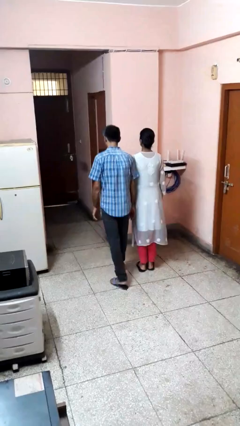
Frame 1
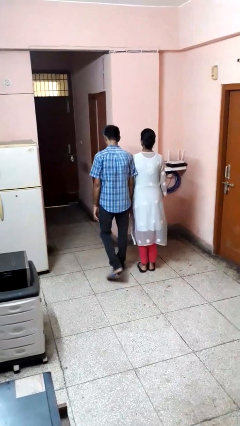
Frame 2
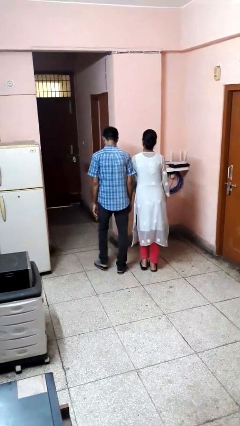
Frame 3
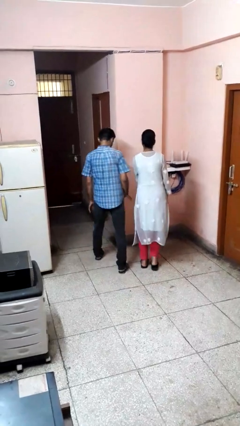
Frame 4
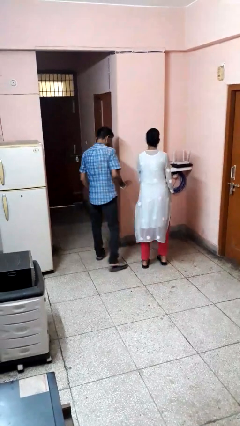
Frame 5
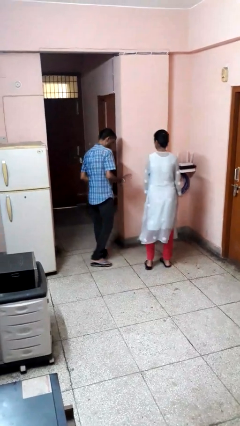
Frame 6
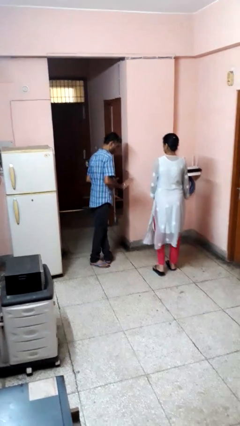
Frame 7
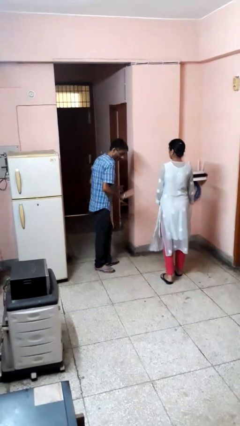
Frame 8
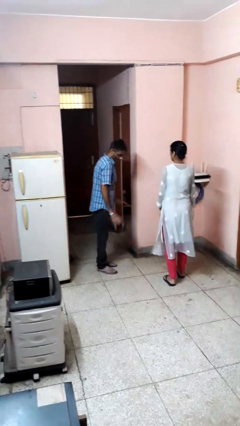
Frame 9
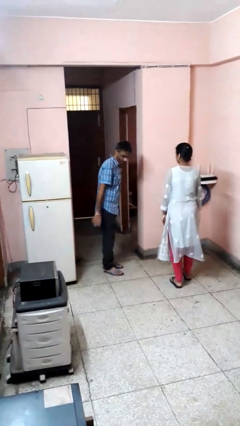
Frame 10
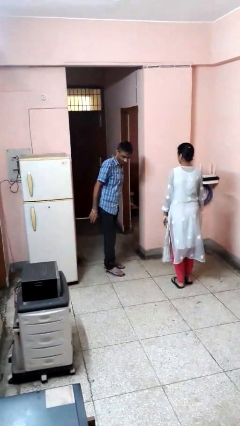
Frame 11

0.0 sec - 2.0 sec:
person bumps into person

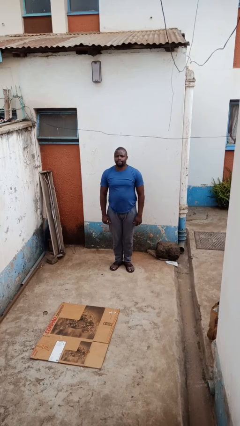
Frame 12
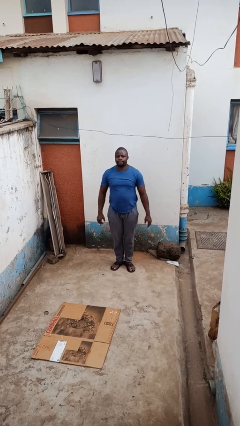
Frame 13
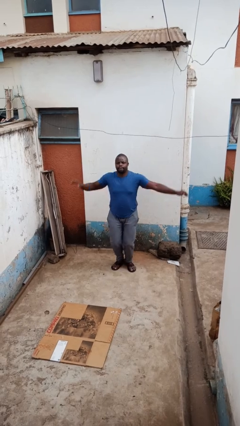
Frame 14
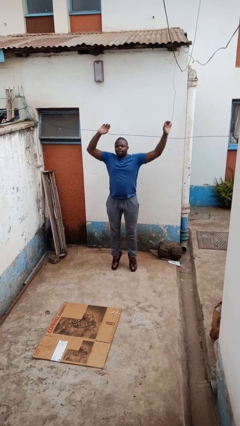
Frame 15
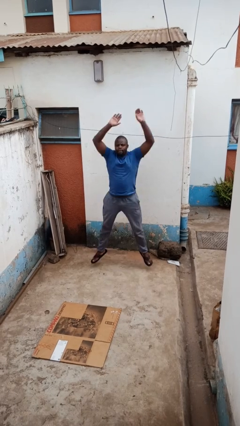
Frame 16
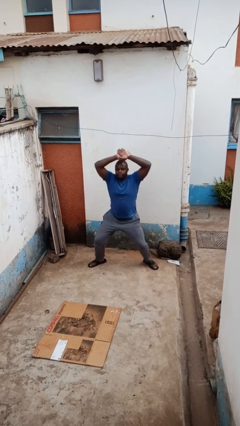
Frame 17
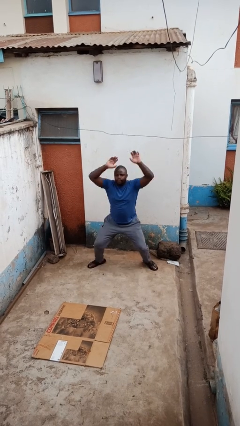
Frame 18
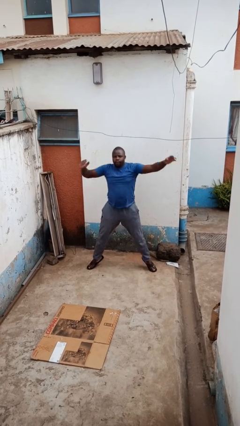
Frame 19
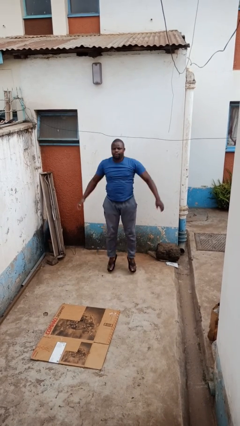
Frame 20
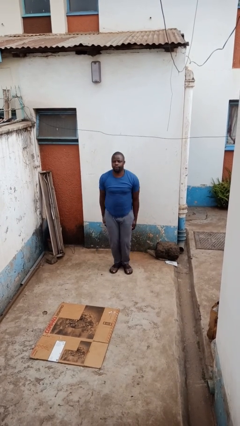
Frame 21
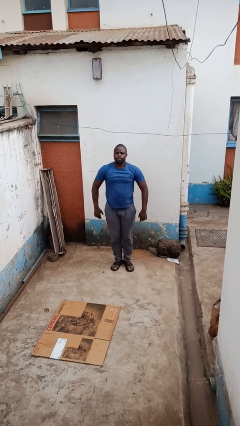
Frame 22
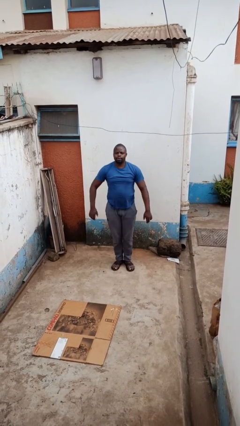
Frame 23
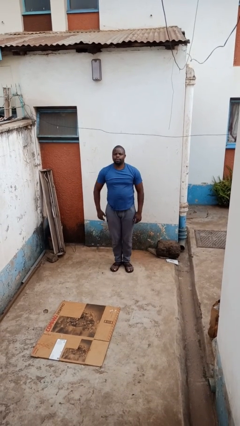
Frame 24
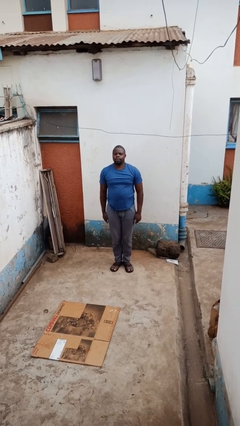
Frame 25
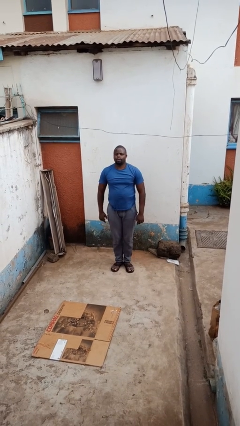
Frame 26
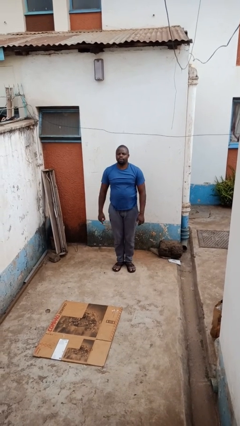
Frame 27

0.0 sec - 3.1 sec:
person exercises with jumping jacks

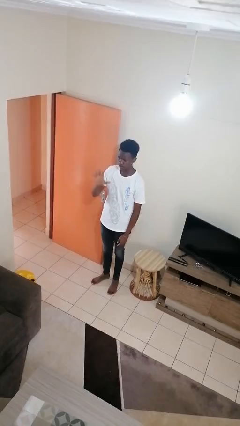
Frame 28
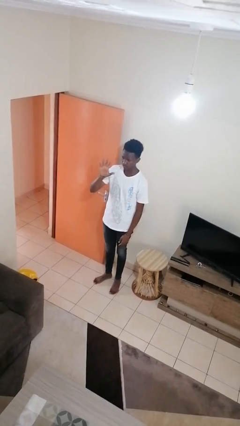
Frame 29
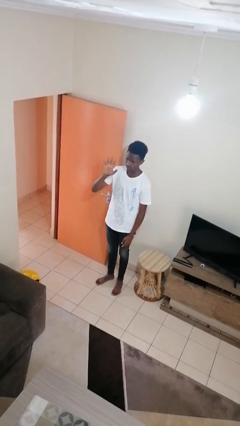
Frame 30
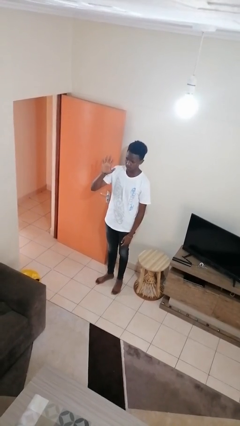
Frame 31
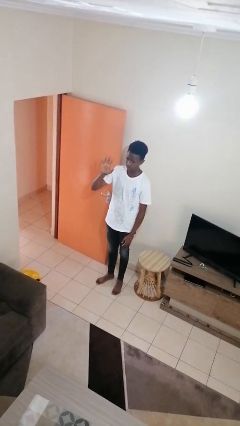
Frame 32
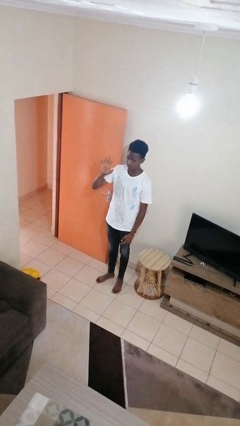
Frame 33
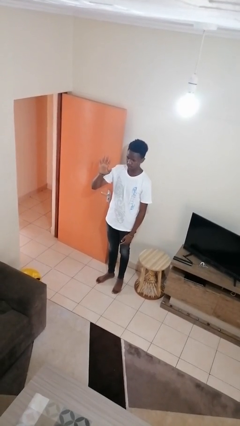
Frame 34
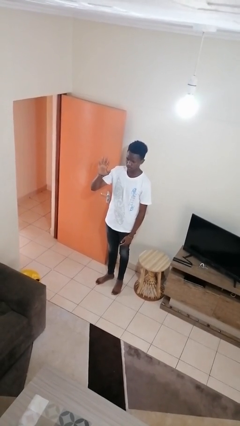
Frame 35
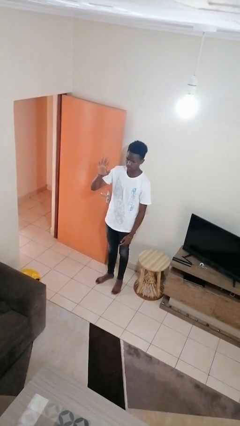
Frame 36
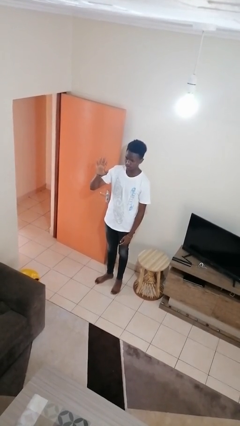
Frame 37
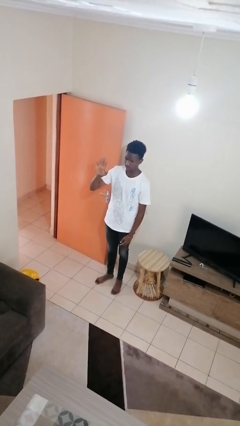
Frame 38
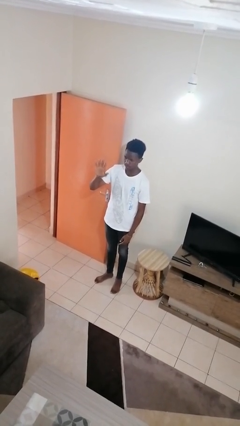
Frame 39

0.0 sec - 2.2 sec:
person gestures number five

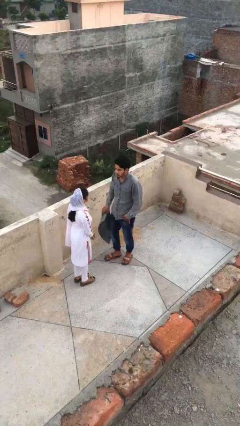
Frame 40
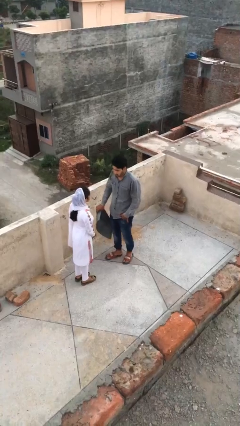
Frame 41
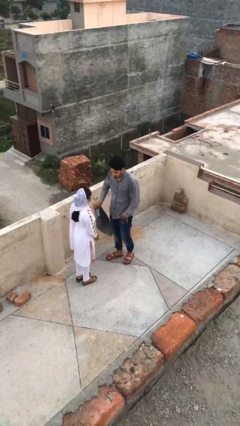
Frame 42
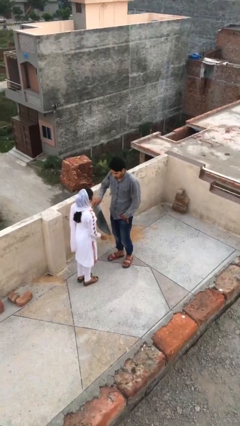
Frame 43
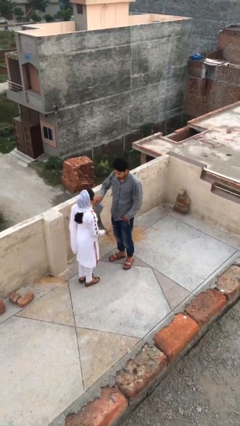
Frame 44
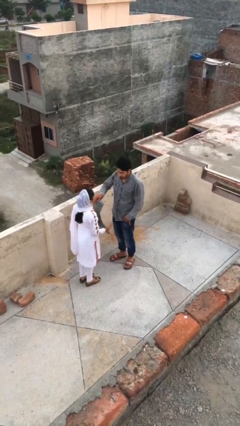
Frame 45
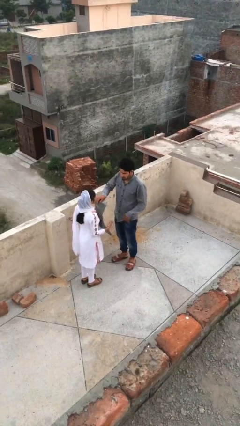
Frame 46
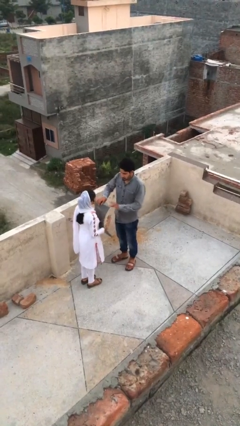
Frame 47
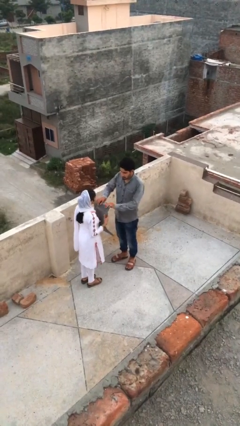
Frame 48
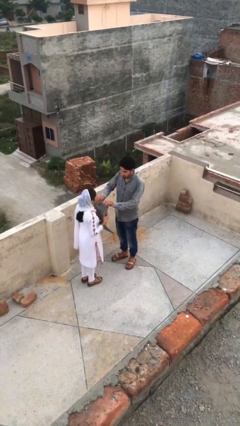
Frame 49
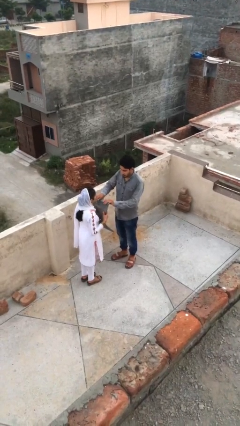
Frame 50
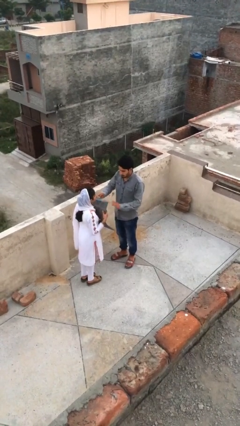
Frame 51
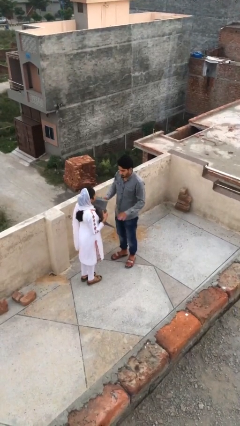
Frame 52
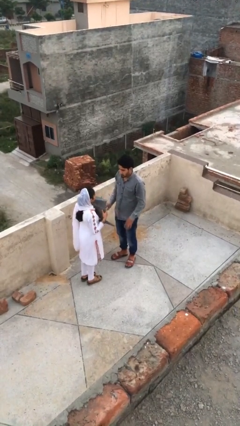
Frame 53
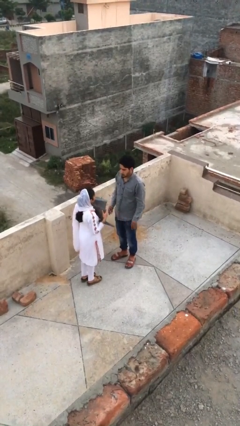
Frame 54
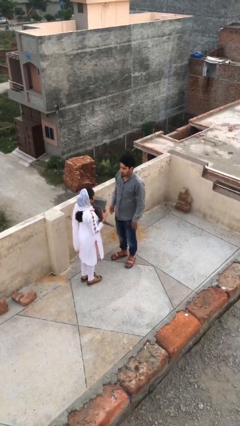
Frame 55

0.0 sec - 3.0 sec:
person transfers object to person

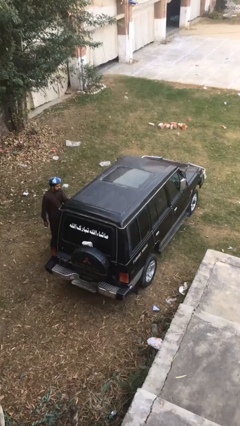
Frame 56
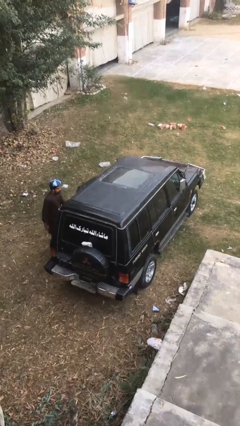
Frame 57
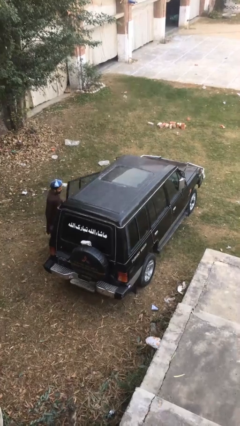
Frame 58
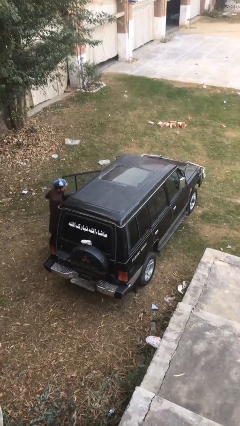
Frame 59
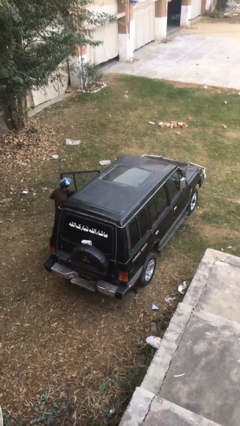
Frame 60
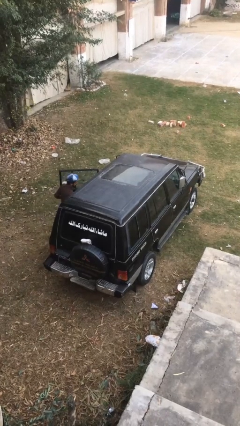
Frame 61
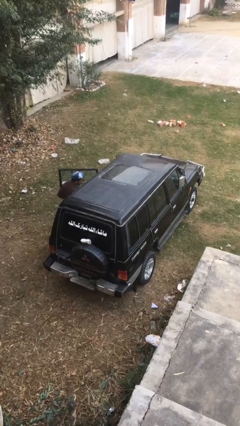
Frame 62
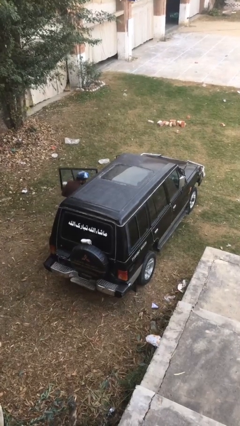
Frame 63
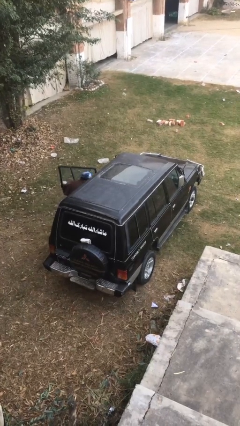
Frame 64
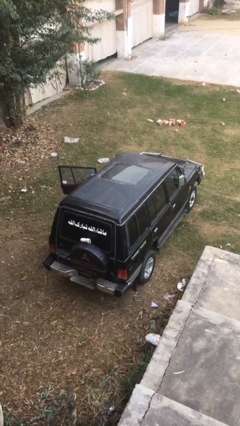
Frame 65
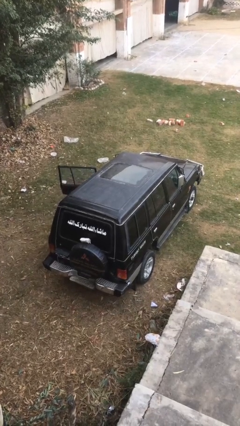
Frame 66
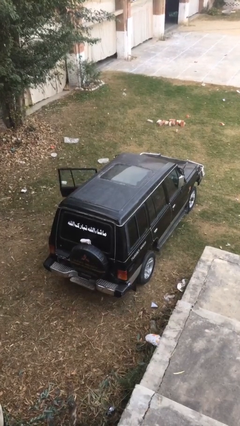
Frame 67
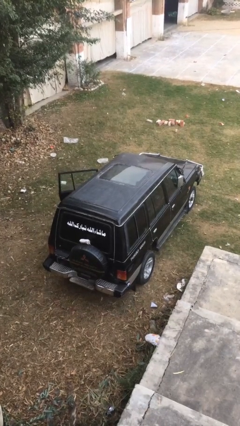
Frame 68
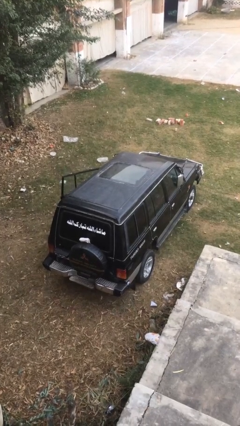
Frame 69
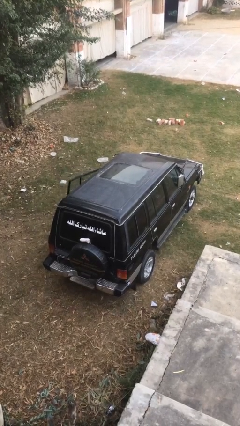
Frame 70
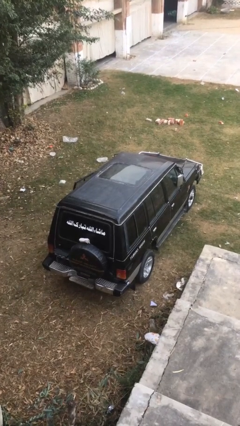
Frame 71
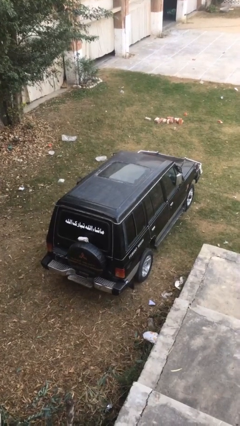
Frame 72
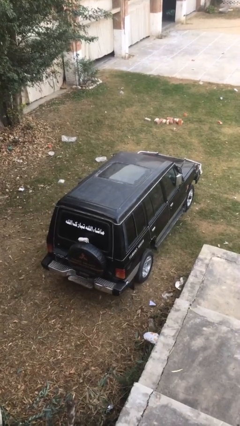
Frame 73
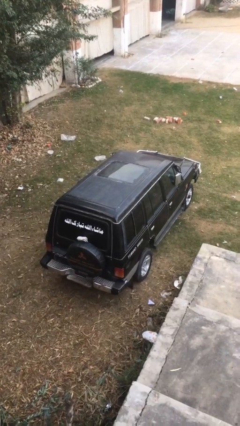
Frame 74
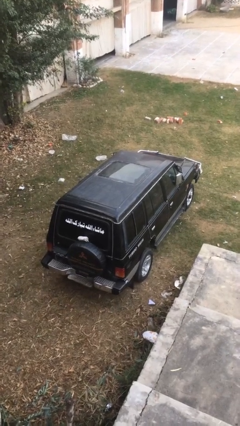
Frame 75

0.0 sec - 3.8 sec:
car picks up person

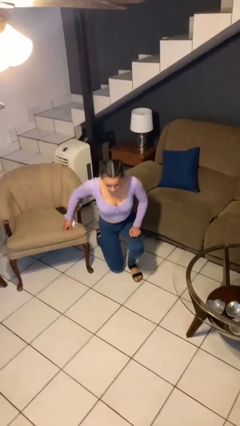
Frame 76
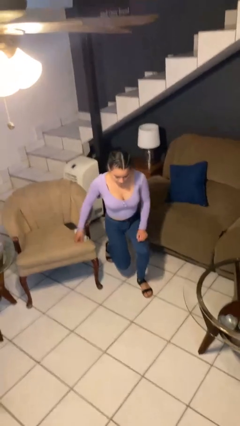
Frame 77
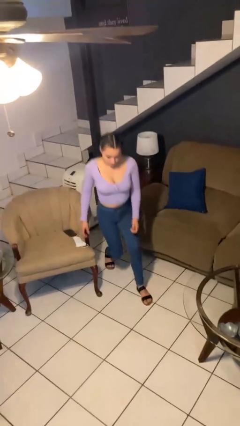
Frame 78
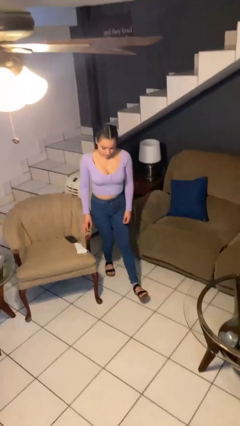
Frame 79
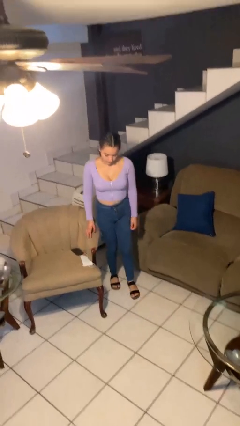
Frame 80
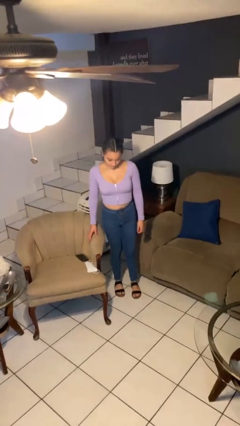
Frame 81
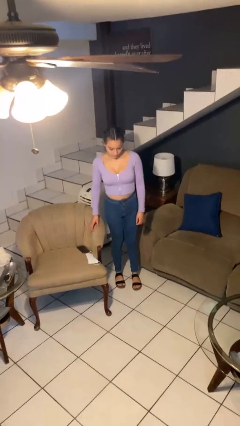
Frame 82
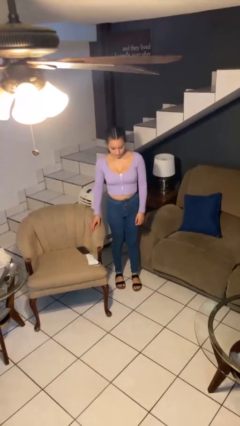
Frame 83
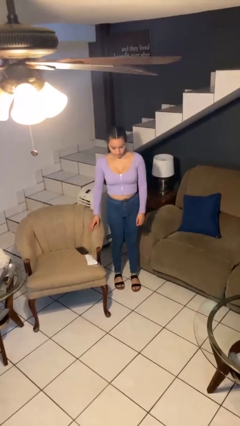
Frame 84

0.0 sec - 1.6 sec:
person stands up from floor

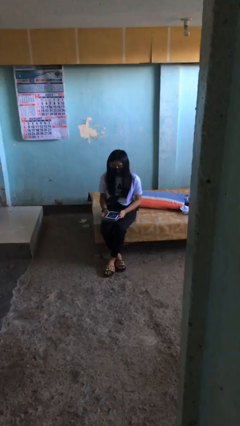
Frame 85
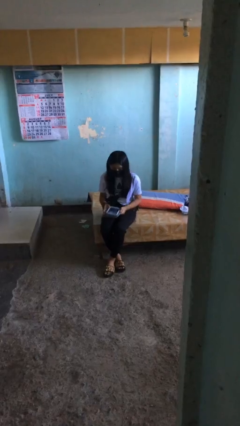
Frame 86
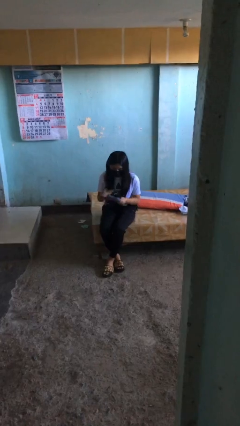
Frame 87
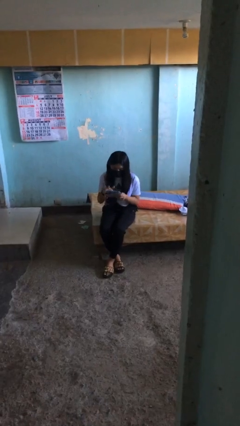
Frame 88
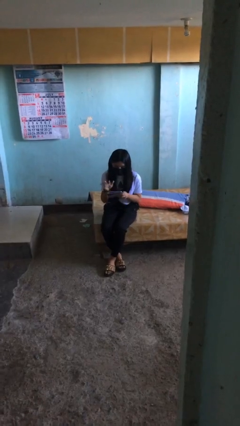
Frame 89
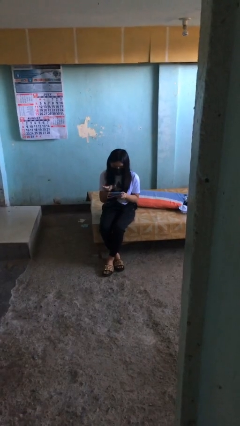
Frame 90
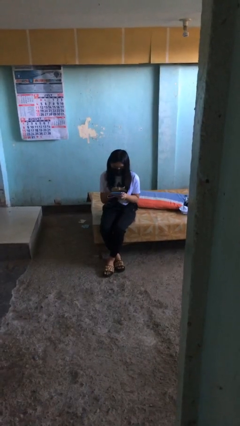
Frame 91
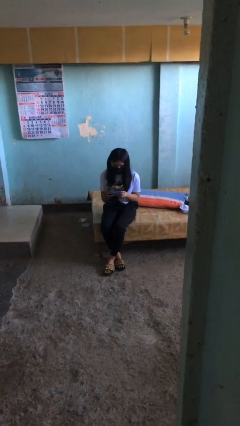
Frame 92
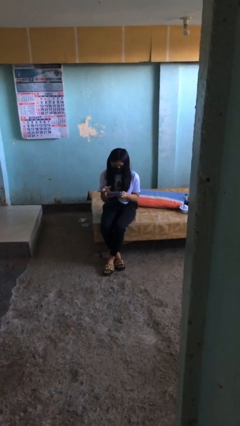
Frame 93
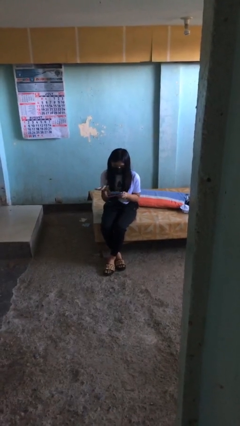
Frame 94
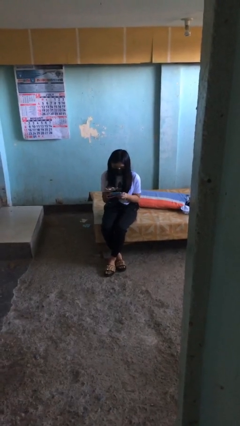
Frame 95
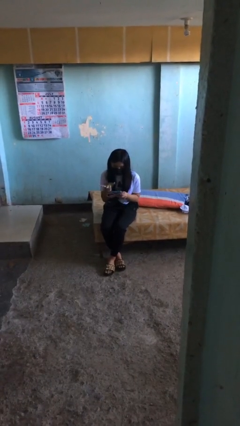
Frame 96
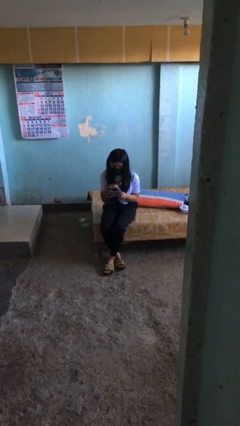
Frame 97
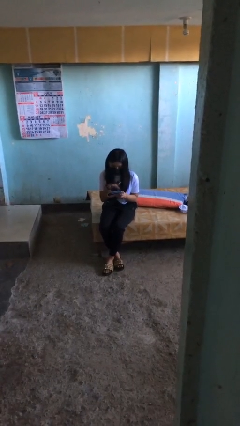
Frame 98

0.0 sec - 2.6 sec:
person interacts with tablet
